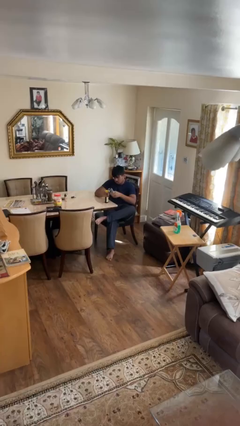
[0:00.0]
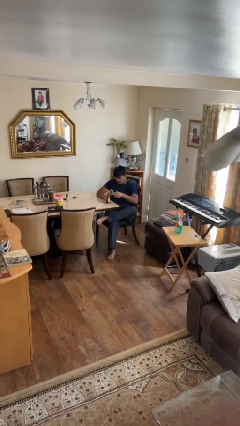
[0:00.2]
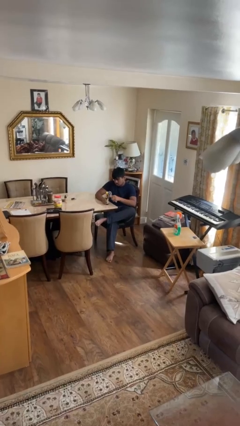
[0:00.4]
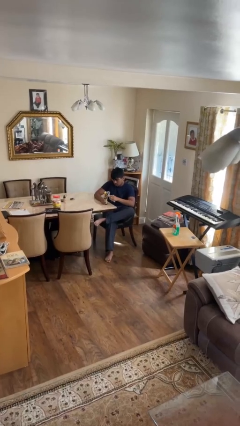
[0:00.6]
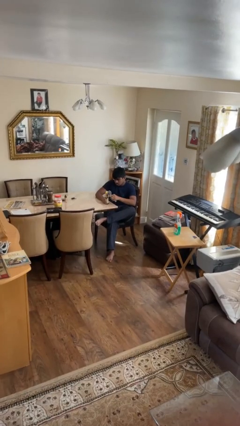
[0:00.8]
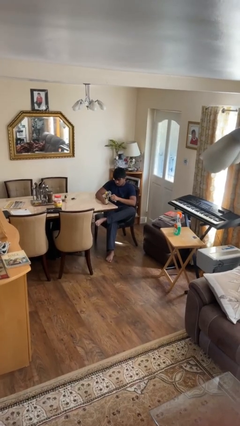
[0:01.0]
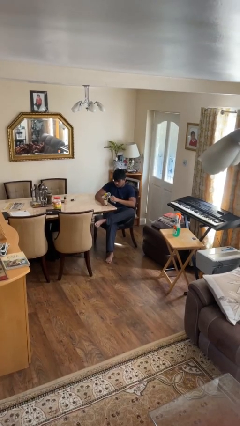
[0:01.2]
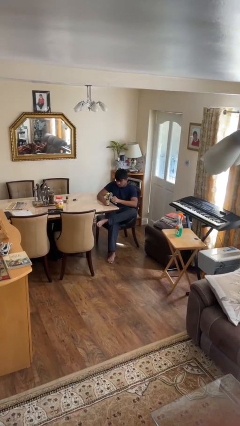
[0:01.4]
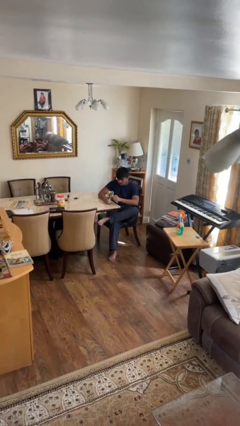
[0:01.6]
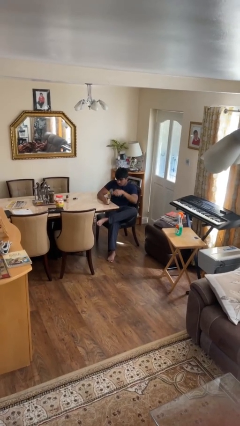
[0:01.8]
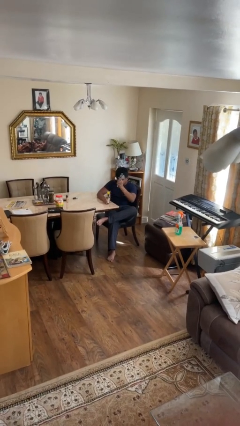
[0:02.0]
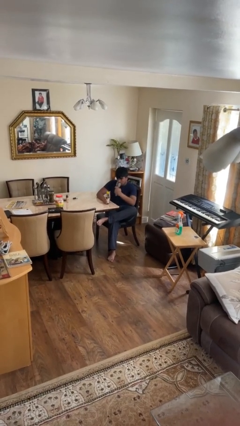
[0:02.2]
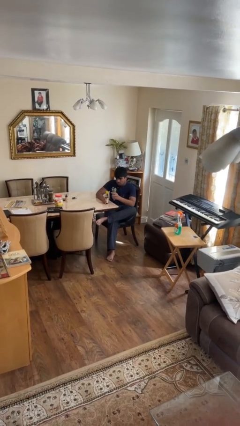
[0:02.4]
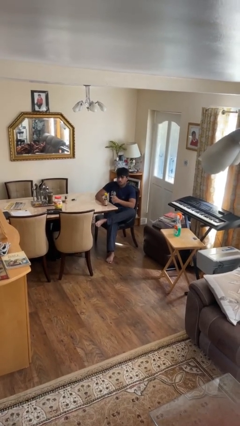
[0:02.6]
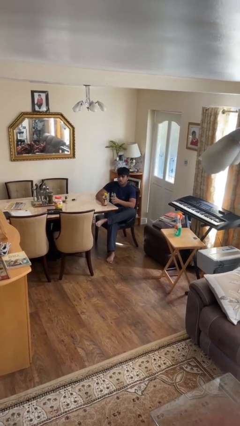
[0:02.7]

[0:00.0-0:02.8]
person opens can with can opener

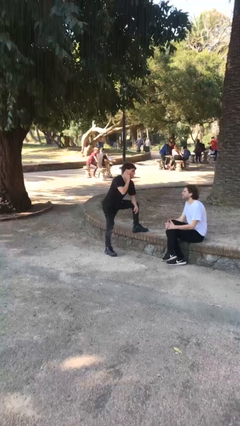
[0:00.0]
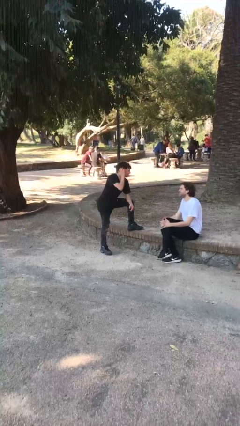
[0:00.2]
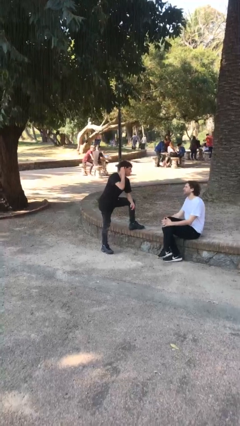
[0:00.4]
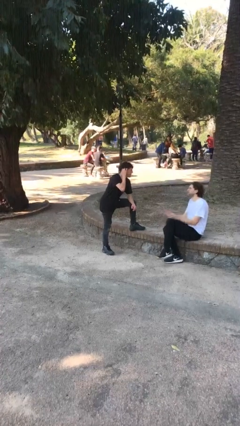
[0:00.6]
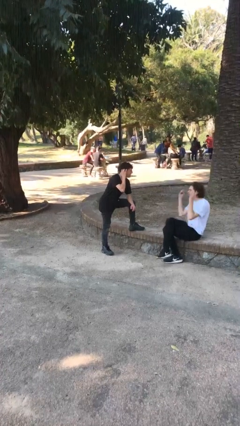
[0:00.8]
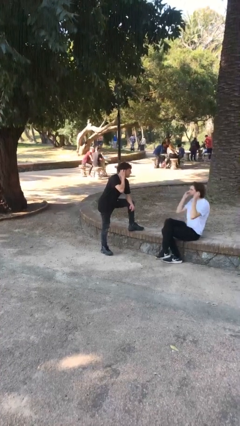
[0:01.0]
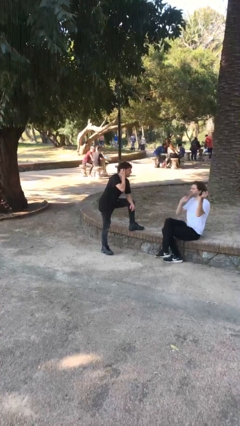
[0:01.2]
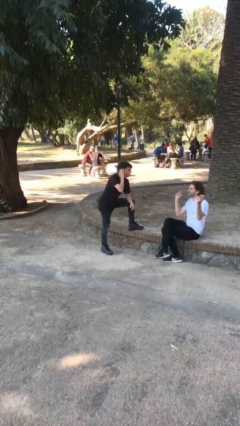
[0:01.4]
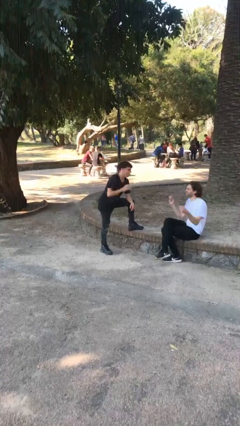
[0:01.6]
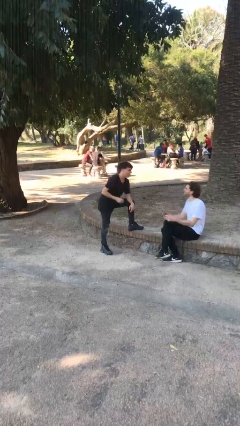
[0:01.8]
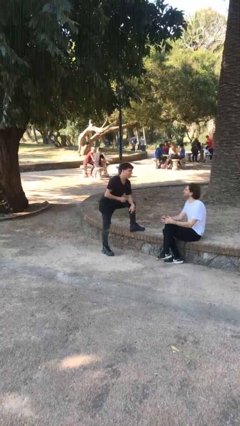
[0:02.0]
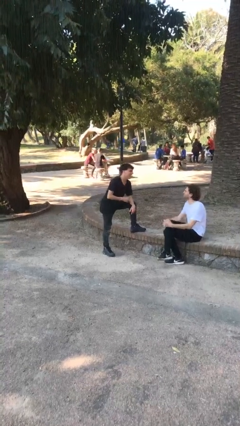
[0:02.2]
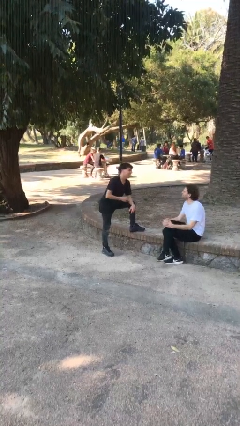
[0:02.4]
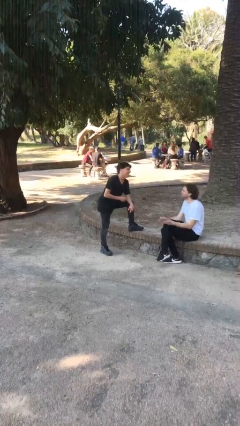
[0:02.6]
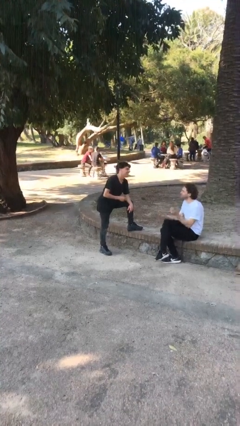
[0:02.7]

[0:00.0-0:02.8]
person talks to person

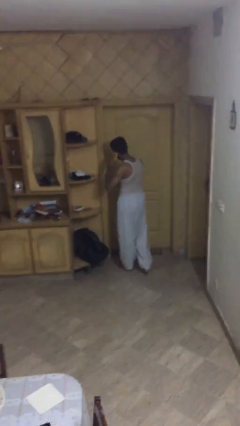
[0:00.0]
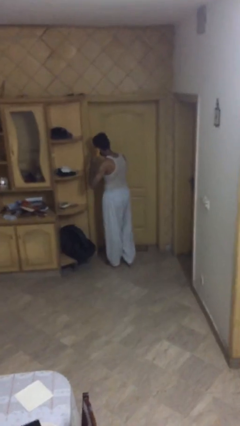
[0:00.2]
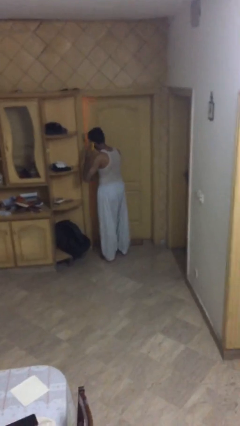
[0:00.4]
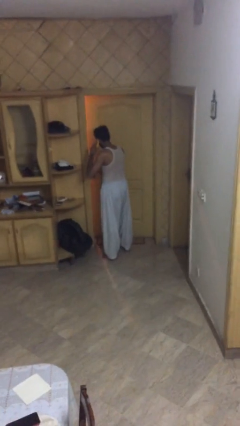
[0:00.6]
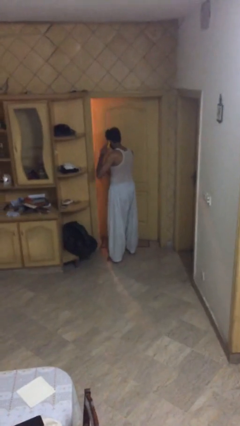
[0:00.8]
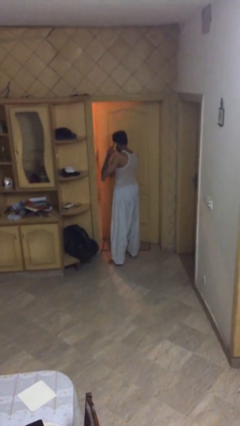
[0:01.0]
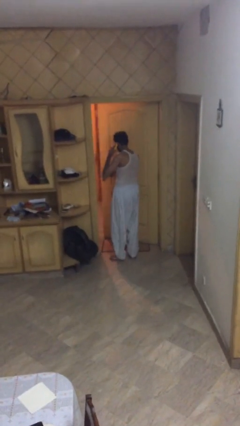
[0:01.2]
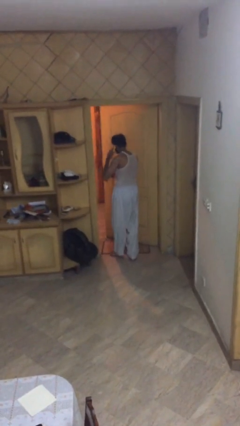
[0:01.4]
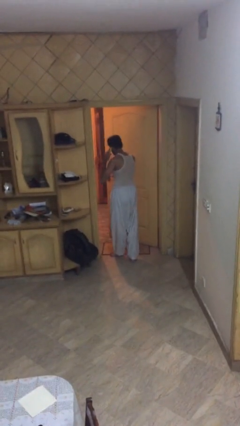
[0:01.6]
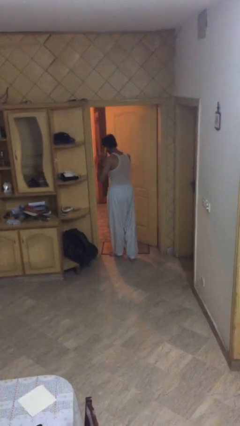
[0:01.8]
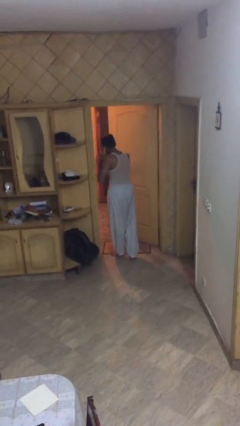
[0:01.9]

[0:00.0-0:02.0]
person opens facility door

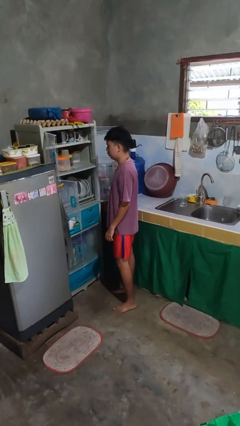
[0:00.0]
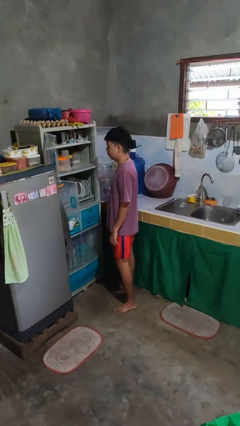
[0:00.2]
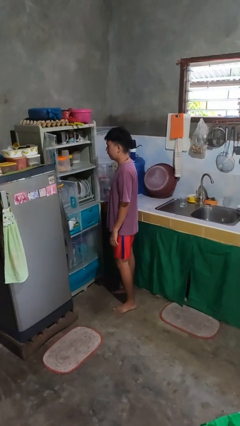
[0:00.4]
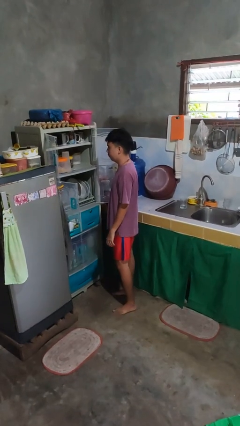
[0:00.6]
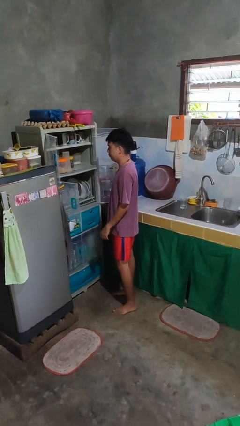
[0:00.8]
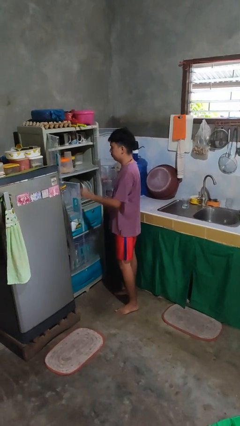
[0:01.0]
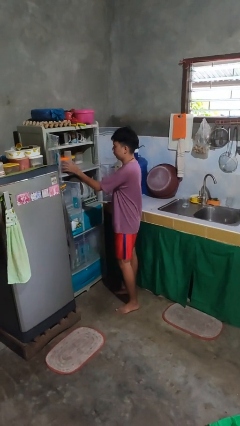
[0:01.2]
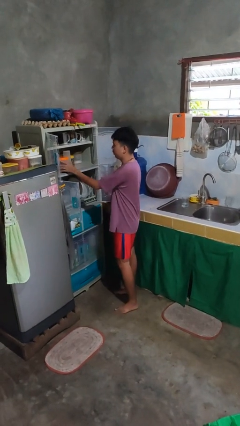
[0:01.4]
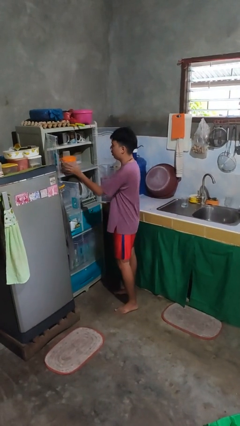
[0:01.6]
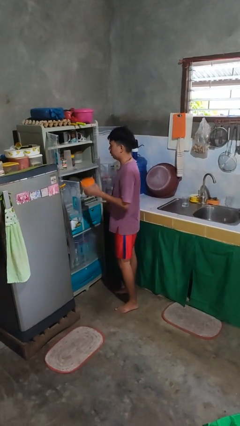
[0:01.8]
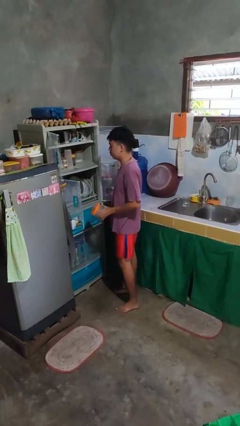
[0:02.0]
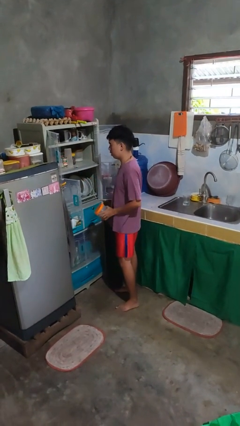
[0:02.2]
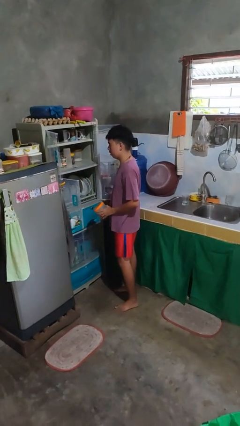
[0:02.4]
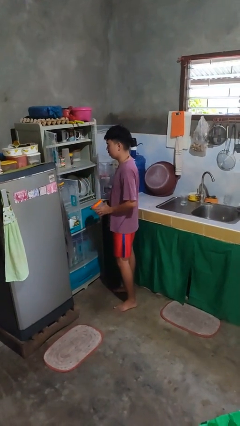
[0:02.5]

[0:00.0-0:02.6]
person takes object from cabinet

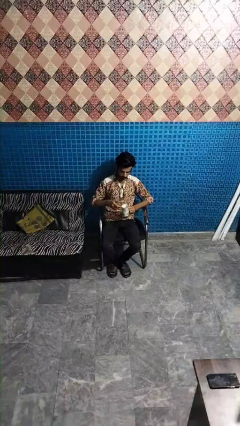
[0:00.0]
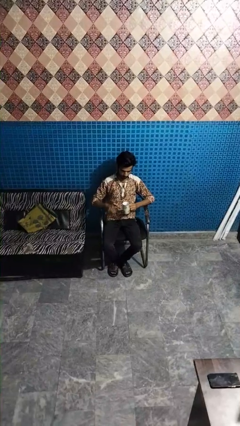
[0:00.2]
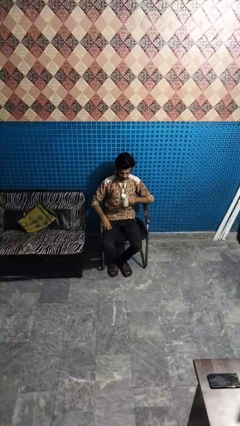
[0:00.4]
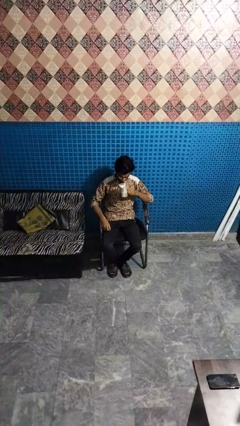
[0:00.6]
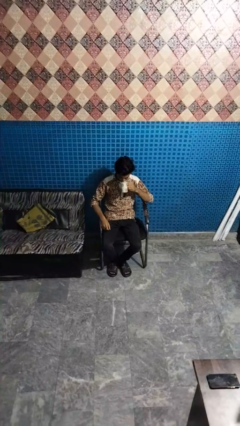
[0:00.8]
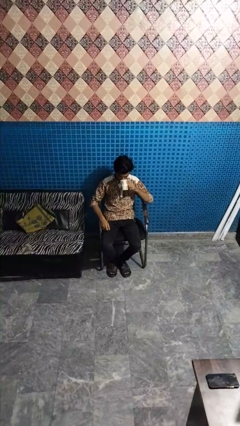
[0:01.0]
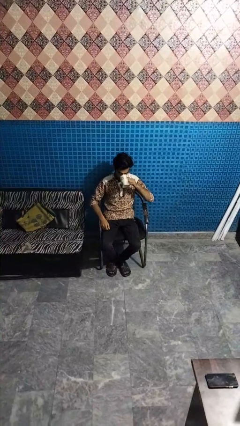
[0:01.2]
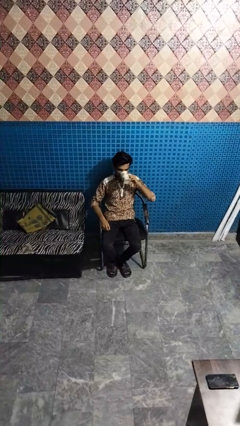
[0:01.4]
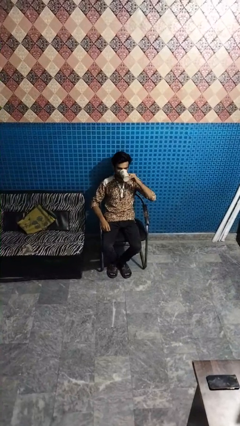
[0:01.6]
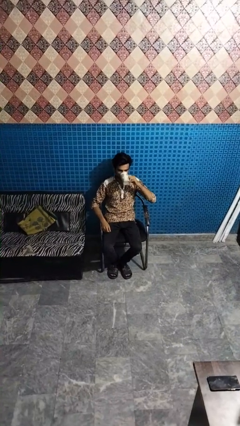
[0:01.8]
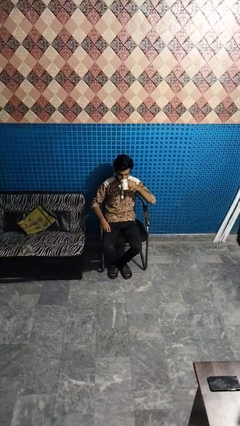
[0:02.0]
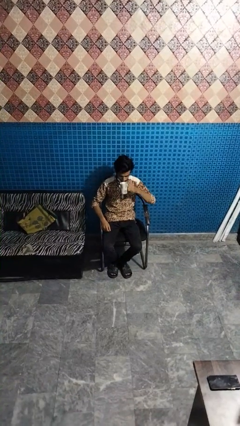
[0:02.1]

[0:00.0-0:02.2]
person drinks from mug

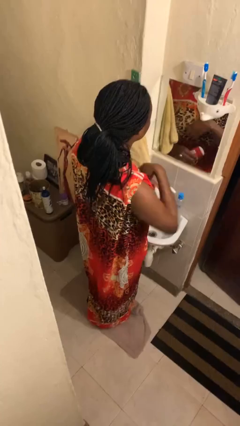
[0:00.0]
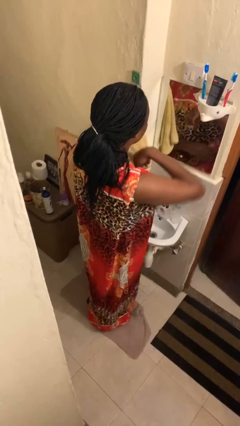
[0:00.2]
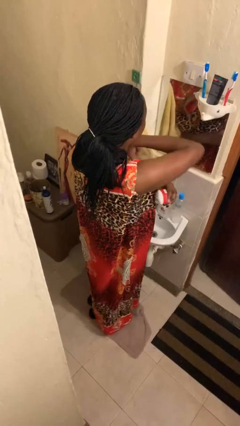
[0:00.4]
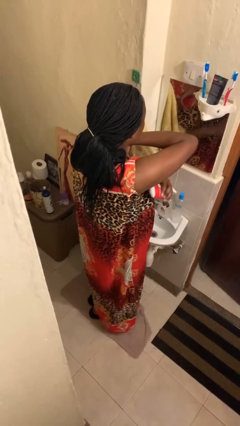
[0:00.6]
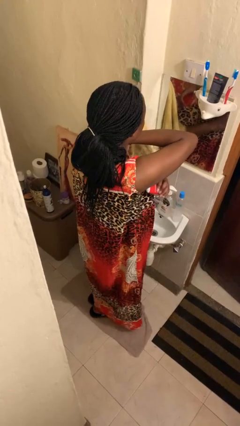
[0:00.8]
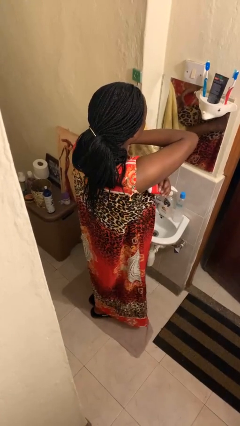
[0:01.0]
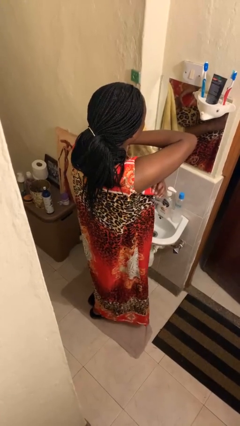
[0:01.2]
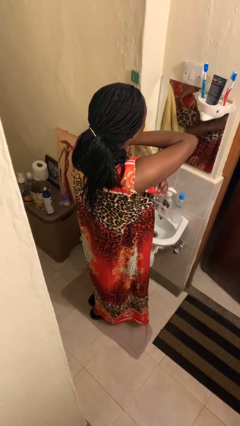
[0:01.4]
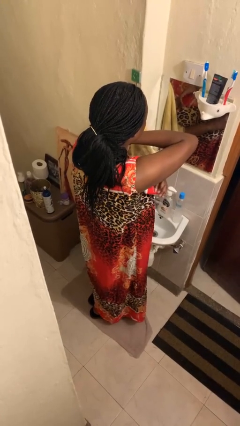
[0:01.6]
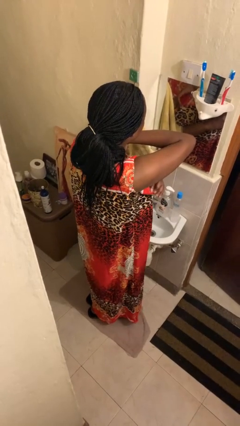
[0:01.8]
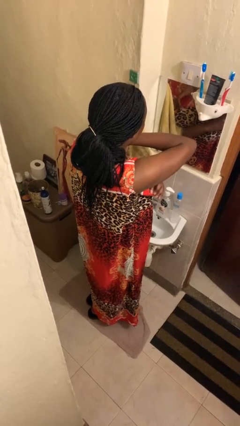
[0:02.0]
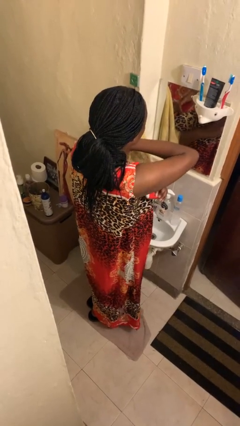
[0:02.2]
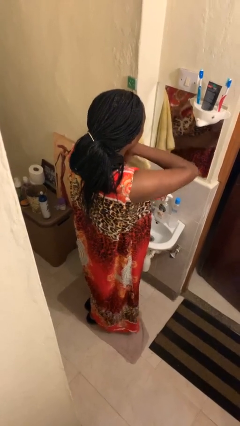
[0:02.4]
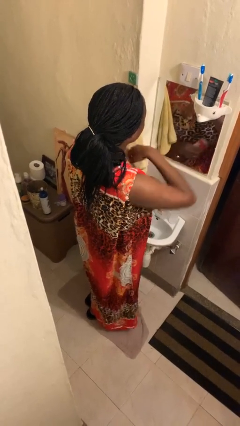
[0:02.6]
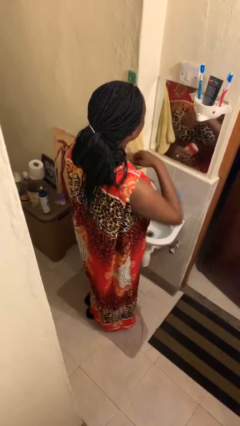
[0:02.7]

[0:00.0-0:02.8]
person applies deodorant

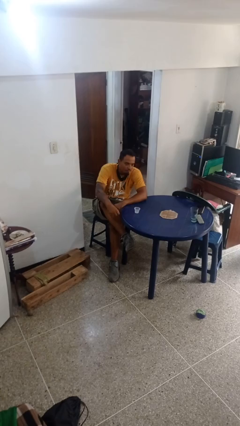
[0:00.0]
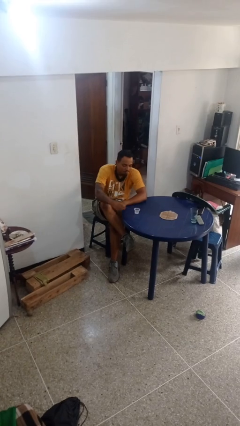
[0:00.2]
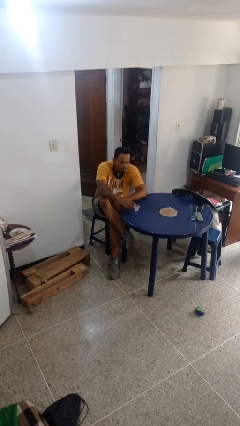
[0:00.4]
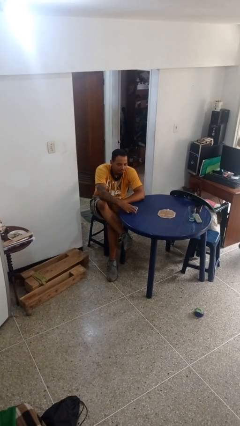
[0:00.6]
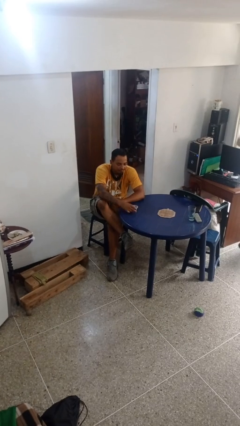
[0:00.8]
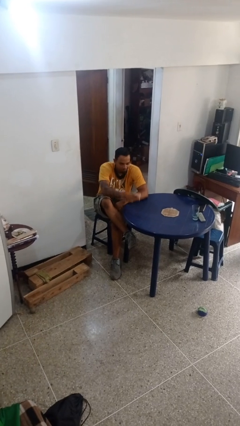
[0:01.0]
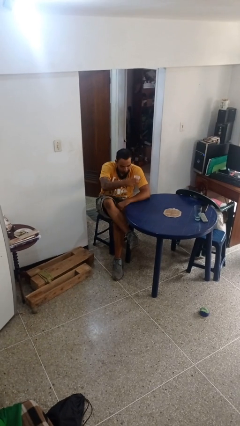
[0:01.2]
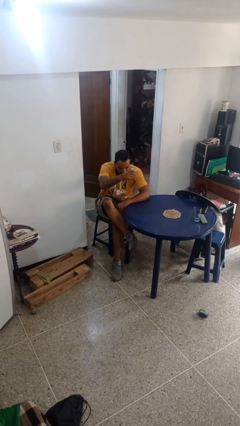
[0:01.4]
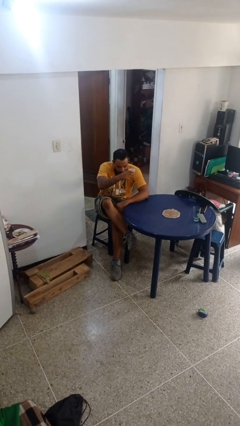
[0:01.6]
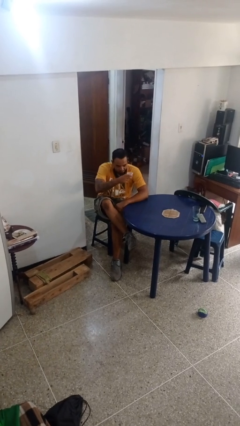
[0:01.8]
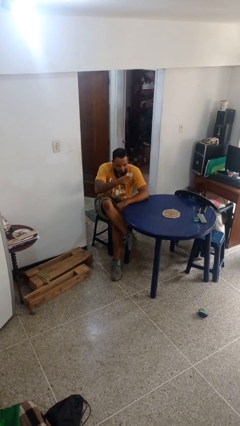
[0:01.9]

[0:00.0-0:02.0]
person picks up object from table
